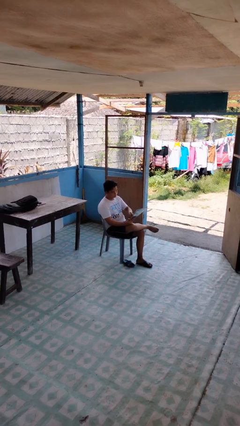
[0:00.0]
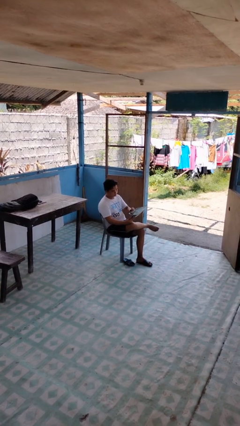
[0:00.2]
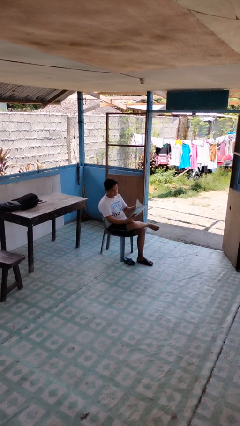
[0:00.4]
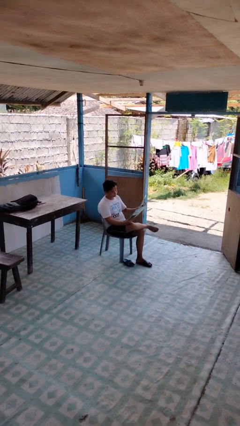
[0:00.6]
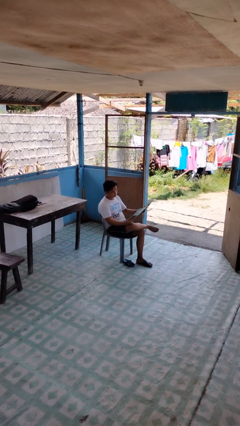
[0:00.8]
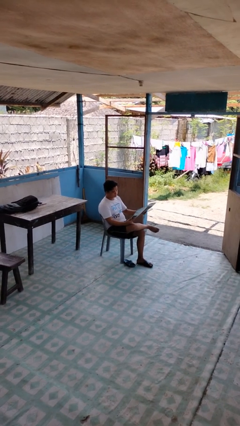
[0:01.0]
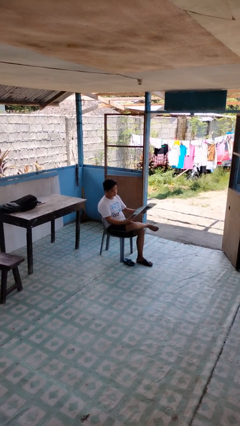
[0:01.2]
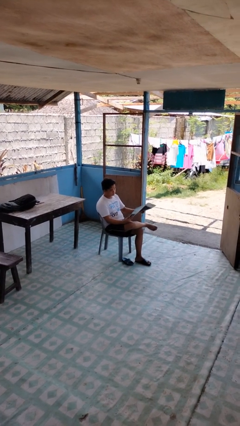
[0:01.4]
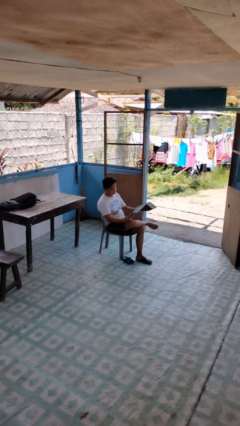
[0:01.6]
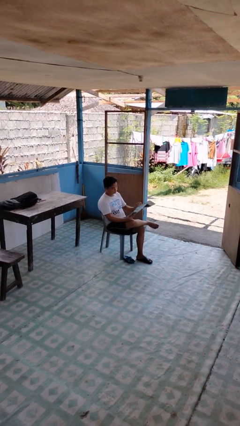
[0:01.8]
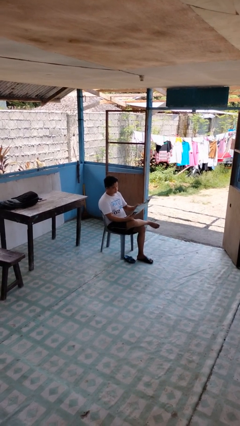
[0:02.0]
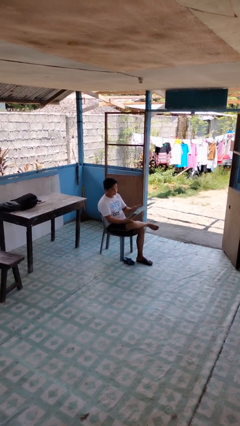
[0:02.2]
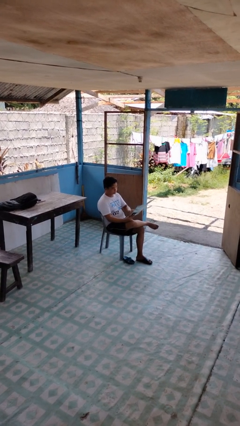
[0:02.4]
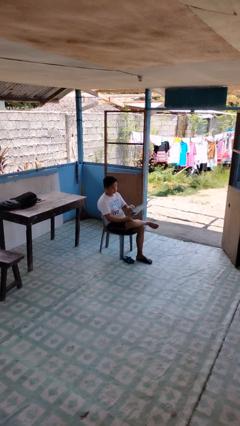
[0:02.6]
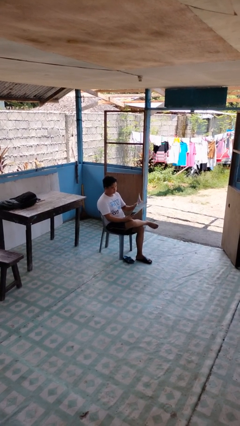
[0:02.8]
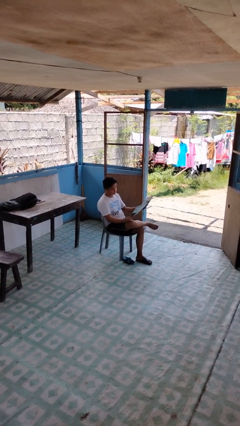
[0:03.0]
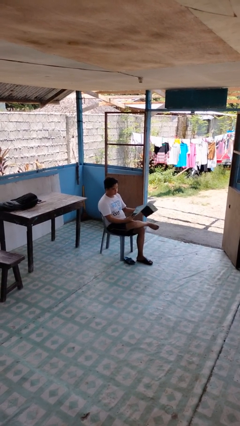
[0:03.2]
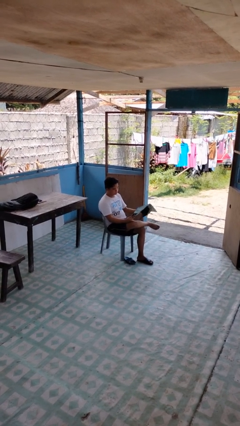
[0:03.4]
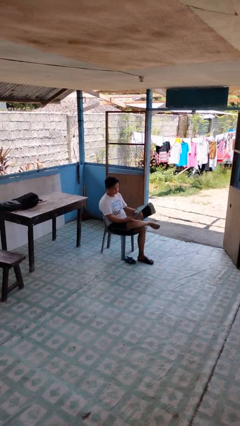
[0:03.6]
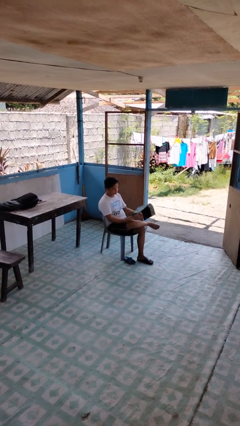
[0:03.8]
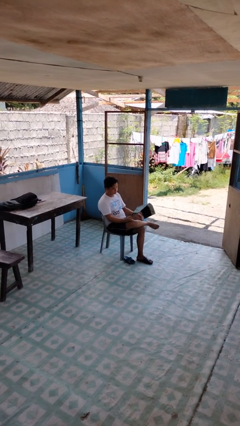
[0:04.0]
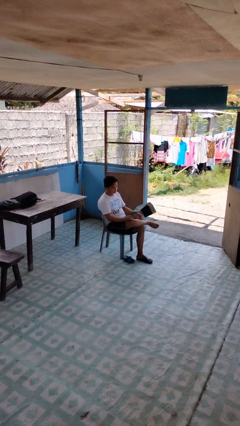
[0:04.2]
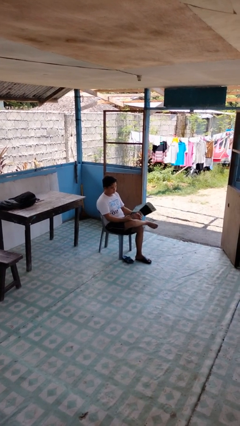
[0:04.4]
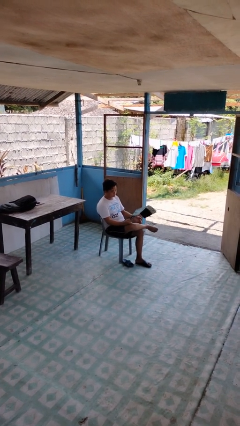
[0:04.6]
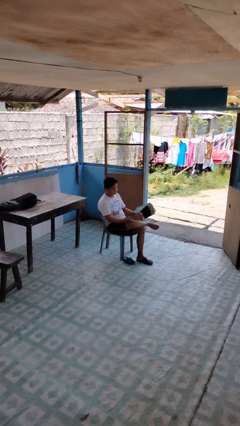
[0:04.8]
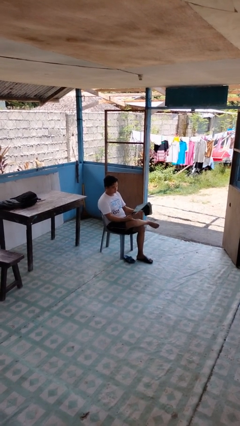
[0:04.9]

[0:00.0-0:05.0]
person reads magazine

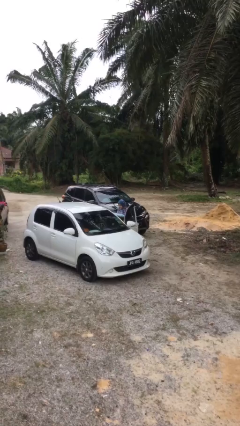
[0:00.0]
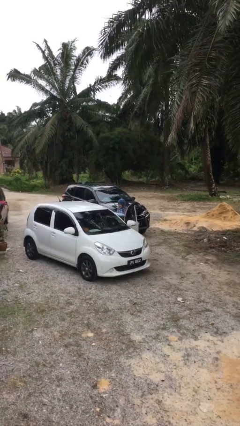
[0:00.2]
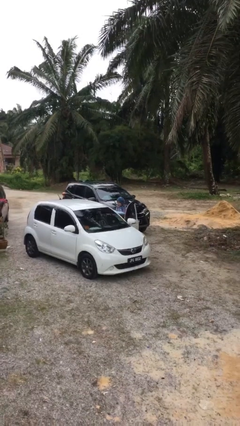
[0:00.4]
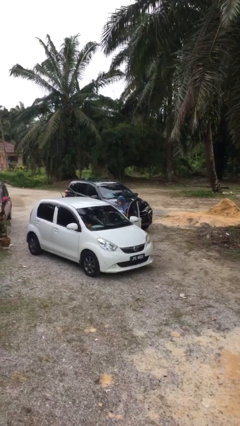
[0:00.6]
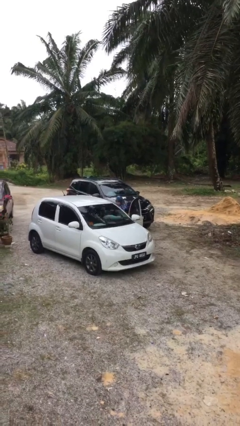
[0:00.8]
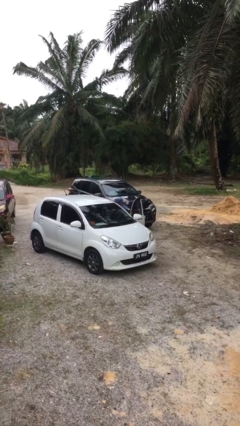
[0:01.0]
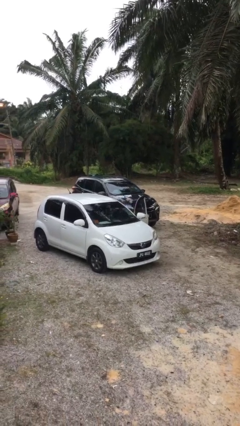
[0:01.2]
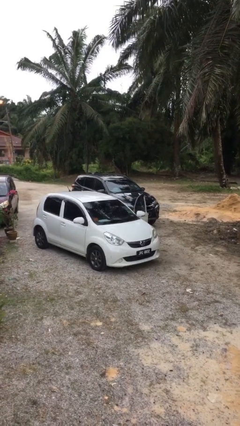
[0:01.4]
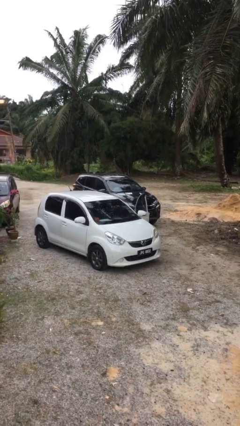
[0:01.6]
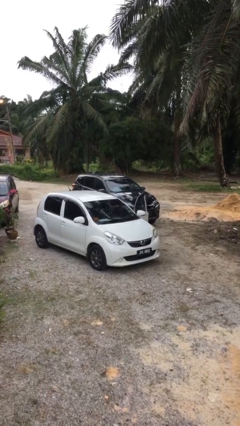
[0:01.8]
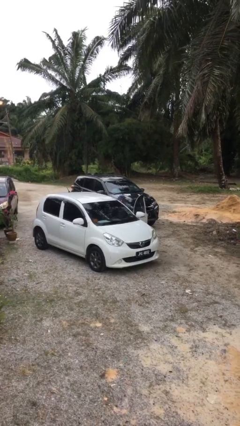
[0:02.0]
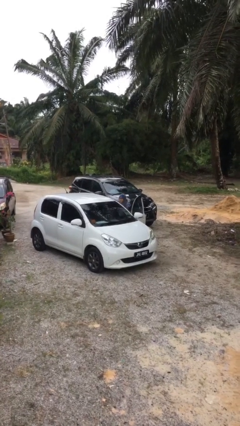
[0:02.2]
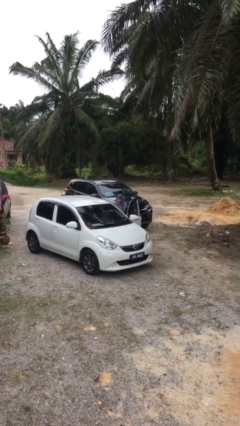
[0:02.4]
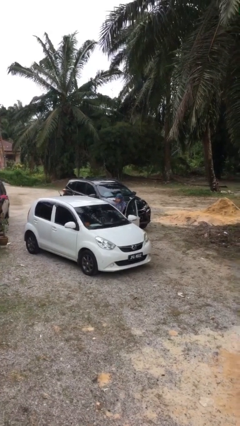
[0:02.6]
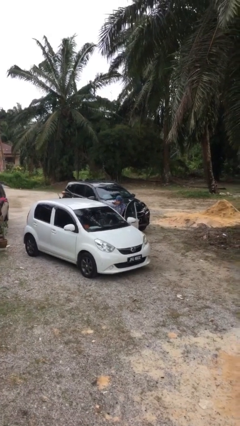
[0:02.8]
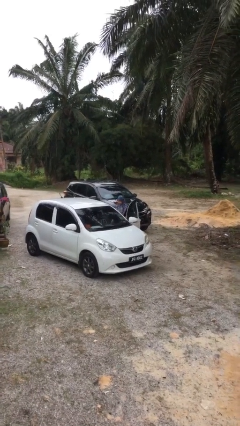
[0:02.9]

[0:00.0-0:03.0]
person loads car

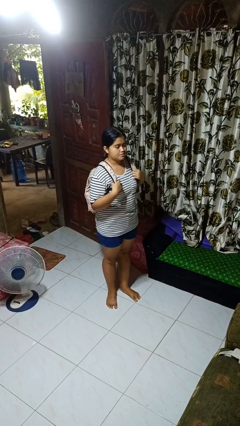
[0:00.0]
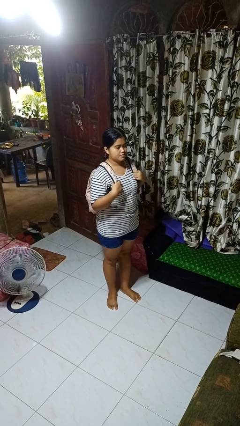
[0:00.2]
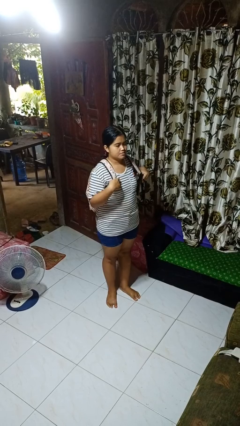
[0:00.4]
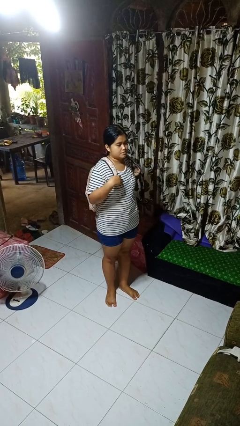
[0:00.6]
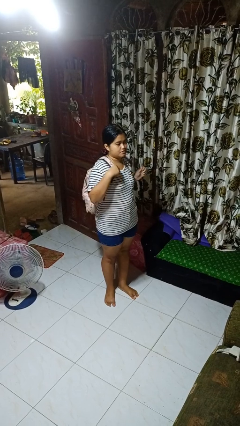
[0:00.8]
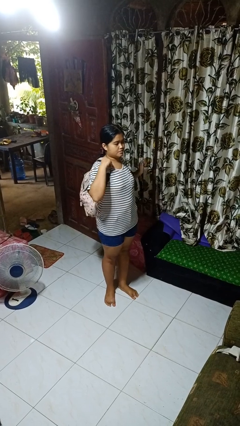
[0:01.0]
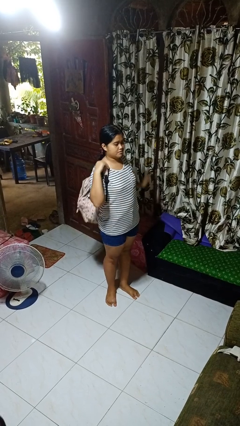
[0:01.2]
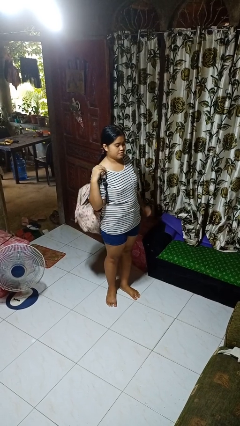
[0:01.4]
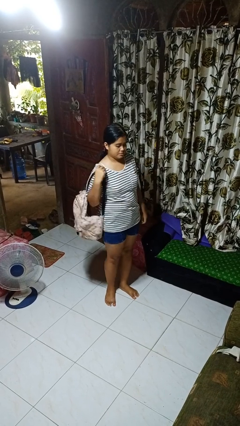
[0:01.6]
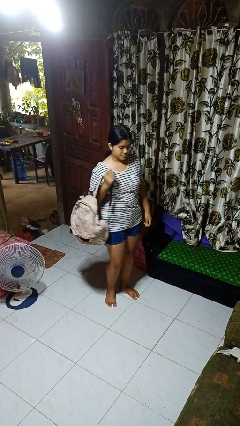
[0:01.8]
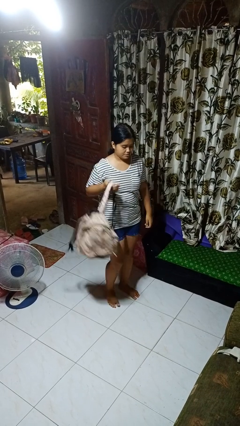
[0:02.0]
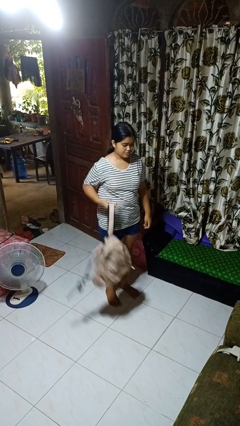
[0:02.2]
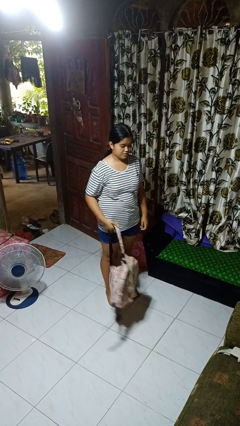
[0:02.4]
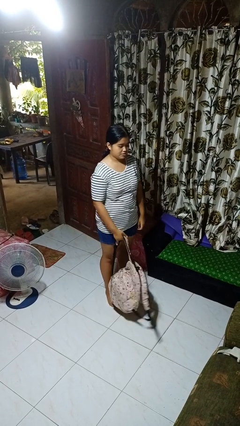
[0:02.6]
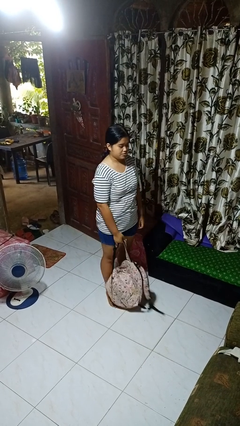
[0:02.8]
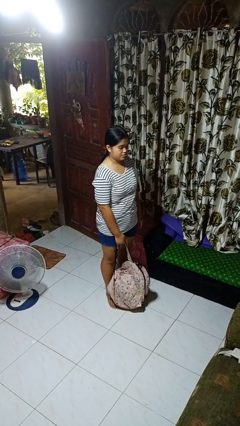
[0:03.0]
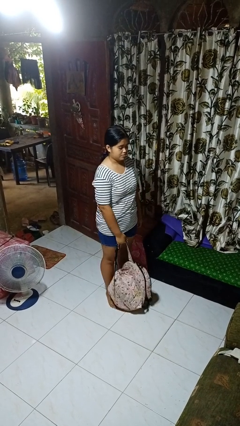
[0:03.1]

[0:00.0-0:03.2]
person takes off backpack

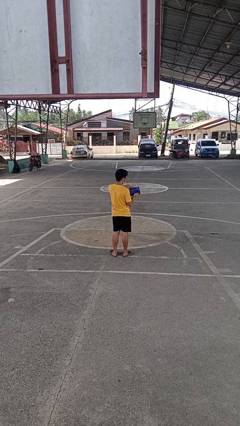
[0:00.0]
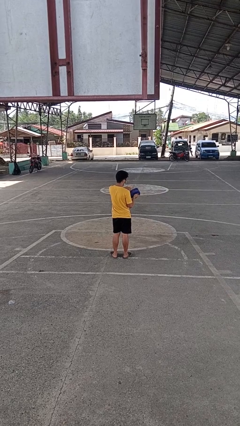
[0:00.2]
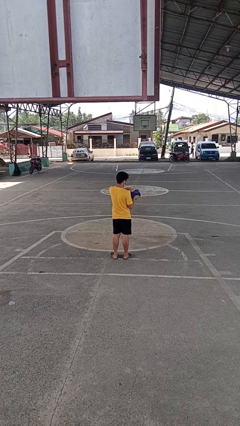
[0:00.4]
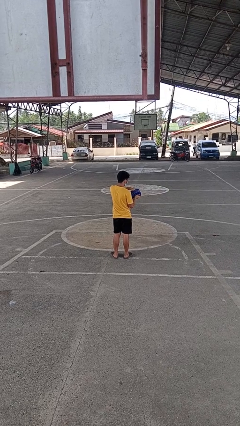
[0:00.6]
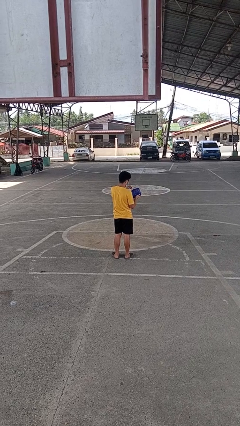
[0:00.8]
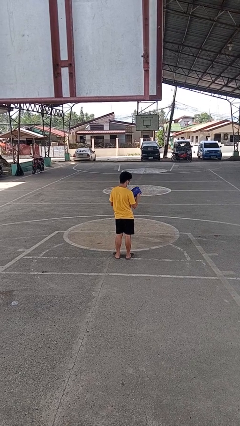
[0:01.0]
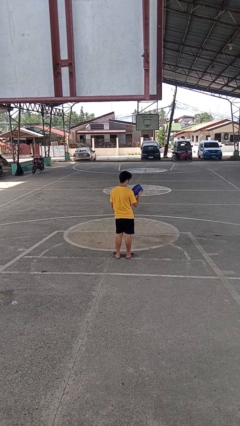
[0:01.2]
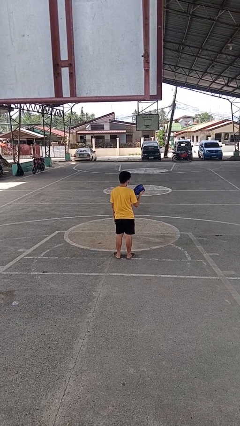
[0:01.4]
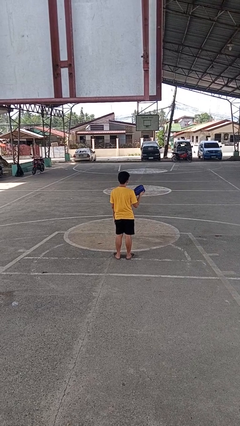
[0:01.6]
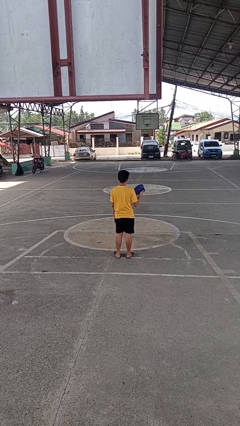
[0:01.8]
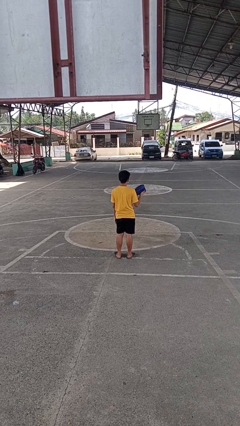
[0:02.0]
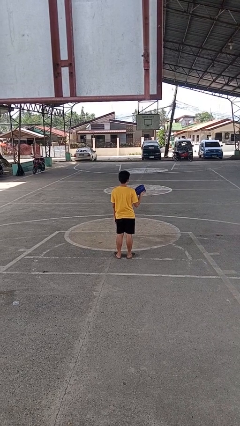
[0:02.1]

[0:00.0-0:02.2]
person puts object into purse

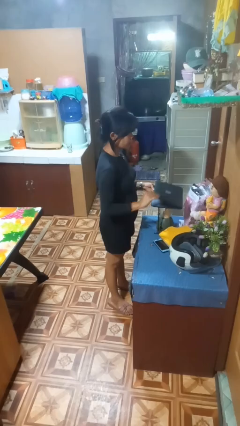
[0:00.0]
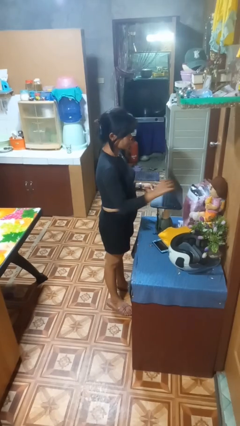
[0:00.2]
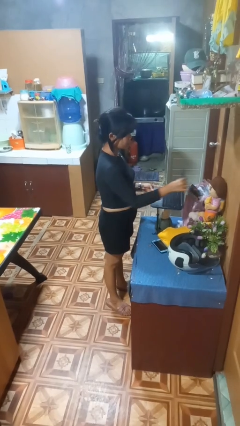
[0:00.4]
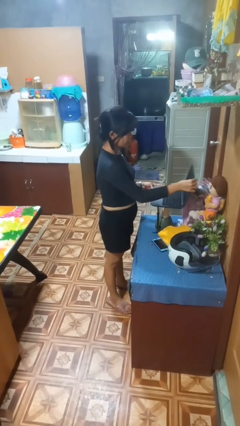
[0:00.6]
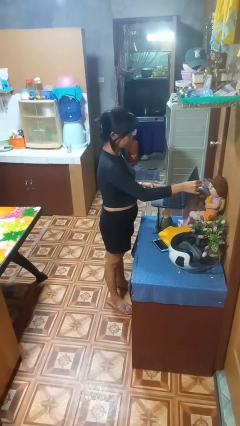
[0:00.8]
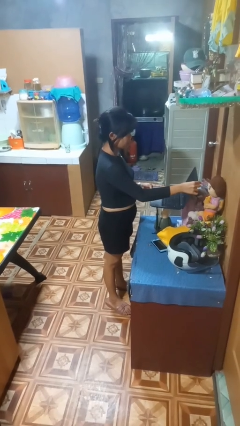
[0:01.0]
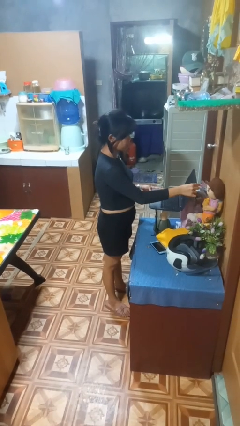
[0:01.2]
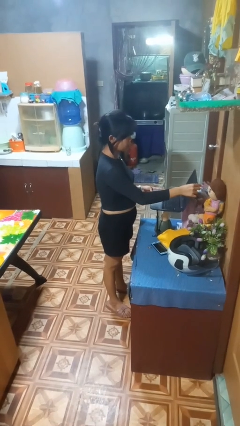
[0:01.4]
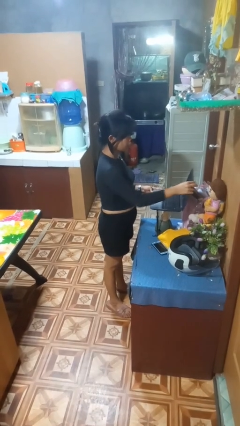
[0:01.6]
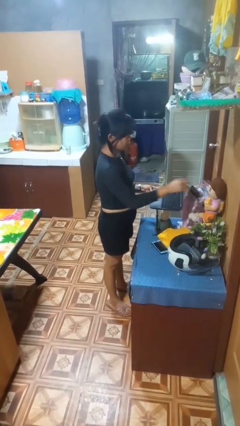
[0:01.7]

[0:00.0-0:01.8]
person opens laptop

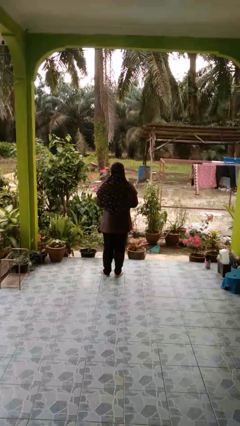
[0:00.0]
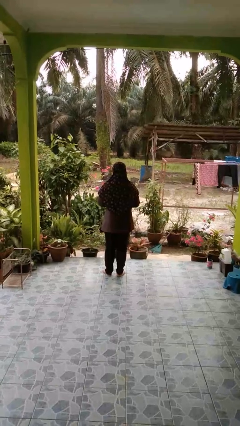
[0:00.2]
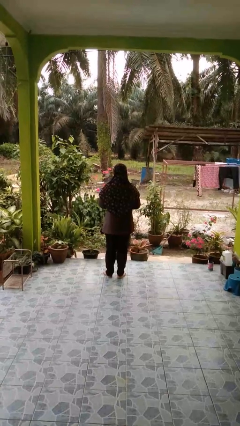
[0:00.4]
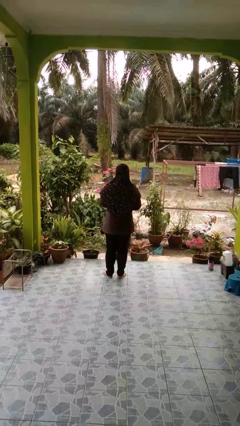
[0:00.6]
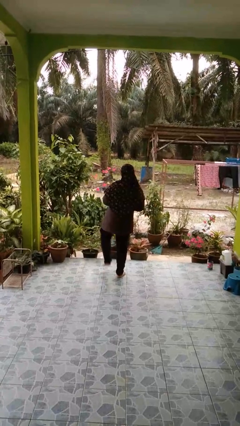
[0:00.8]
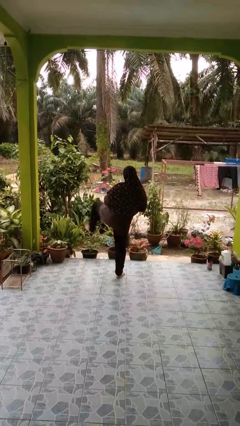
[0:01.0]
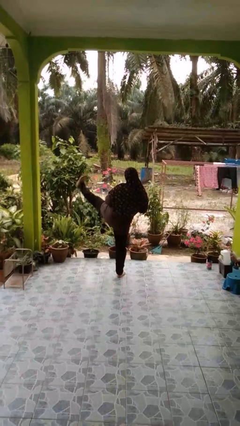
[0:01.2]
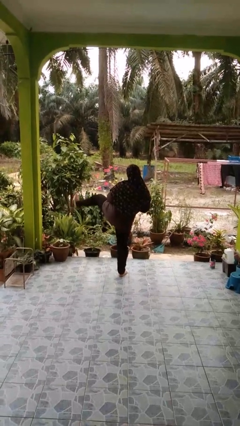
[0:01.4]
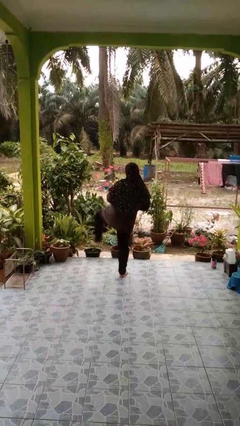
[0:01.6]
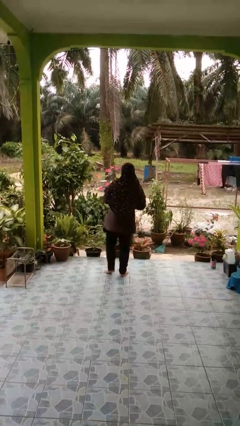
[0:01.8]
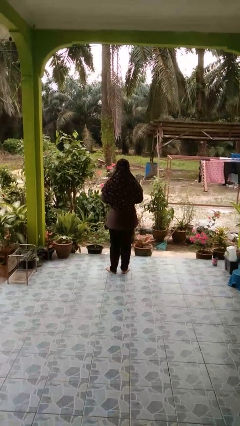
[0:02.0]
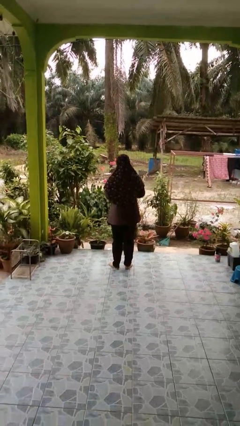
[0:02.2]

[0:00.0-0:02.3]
person karate kicks

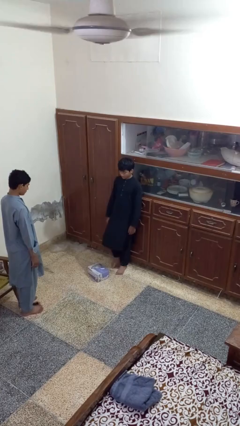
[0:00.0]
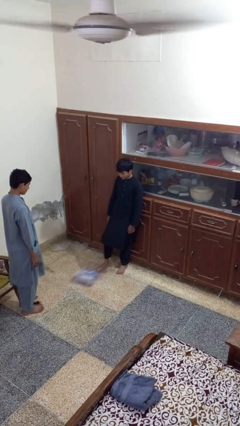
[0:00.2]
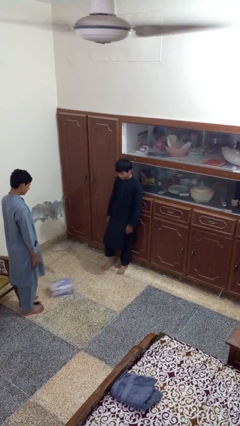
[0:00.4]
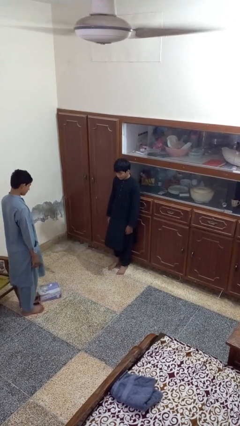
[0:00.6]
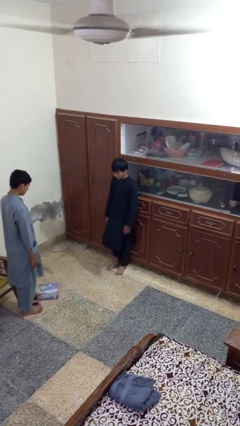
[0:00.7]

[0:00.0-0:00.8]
person kicks object to person
